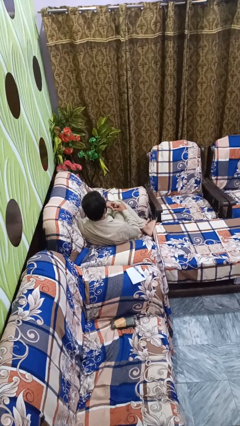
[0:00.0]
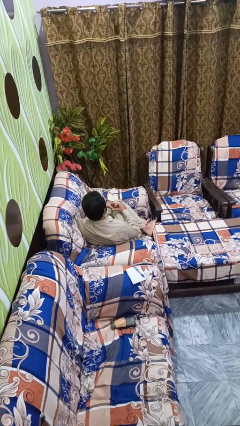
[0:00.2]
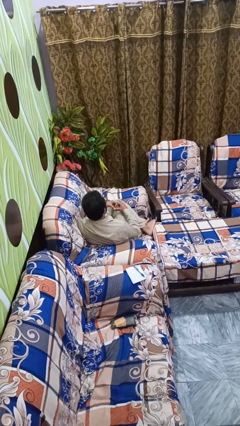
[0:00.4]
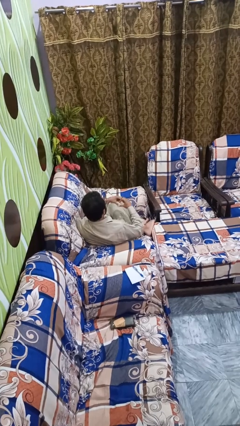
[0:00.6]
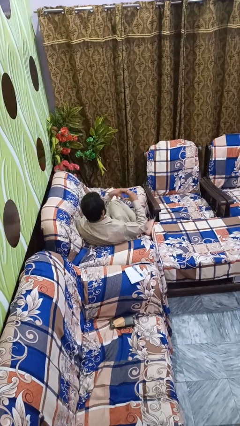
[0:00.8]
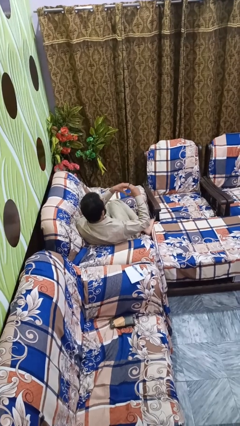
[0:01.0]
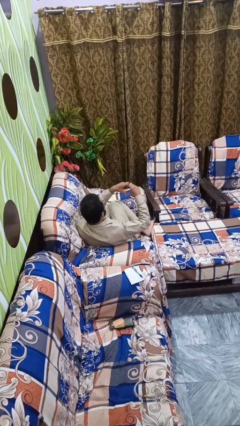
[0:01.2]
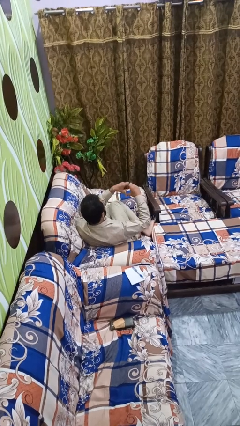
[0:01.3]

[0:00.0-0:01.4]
person gestures heart

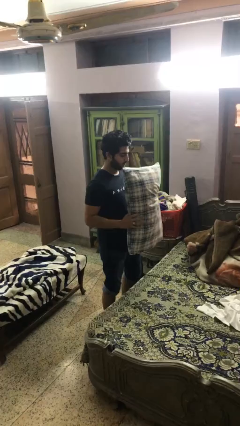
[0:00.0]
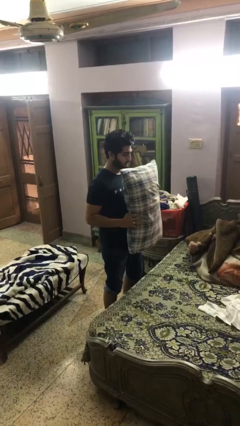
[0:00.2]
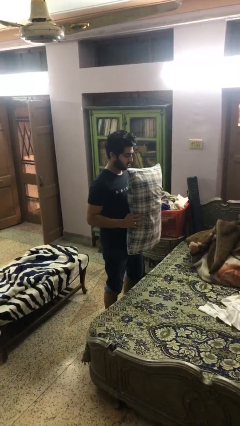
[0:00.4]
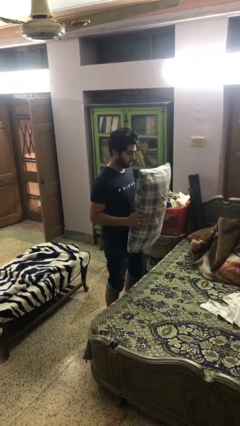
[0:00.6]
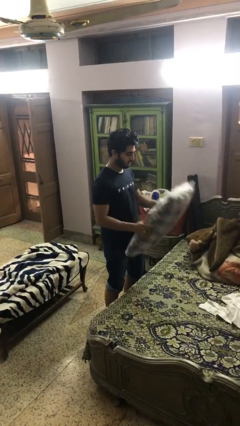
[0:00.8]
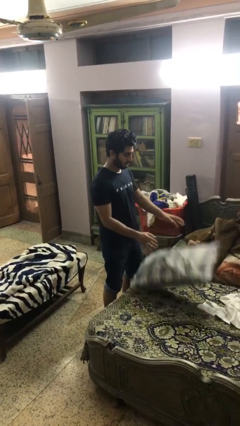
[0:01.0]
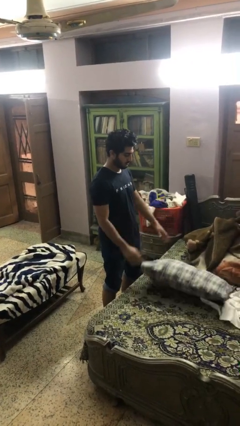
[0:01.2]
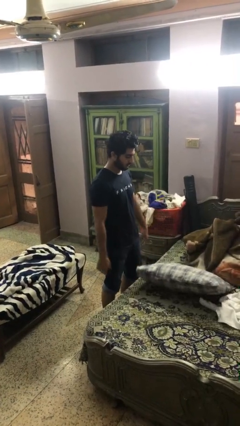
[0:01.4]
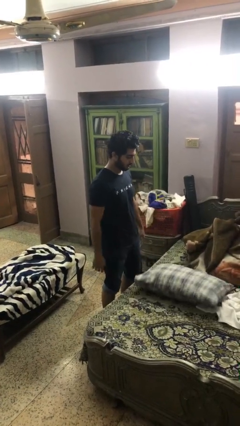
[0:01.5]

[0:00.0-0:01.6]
person puts down object on bed

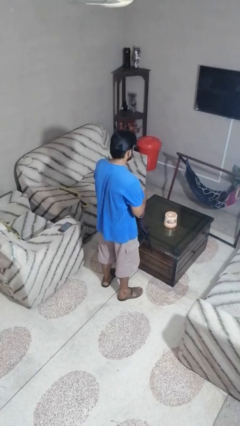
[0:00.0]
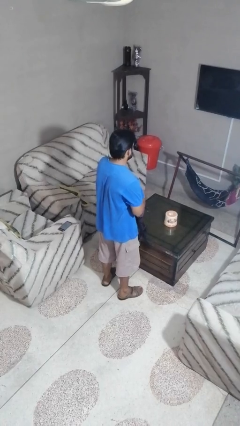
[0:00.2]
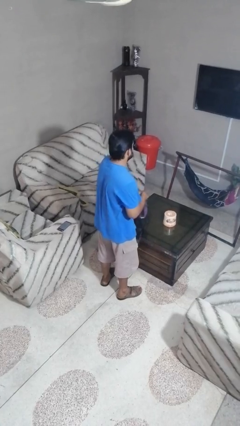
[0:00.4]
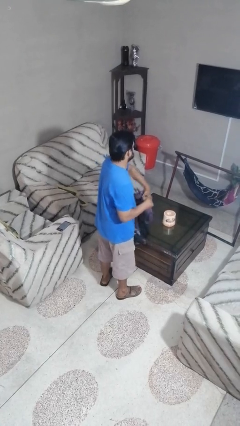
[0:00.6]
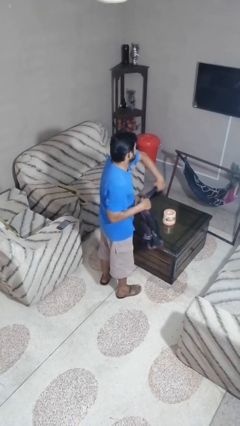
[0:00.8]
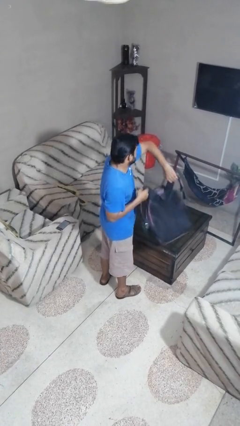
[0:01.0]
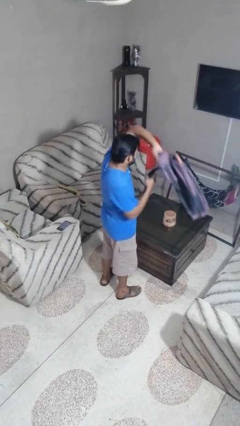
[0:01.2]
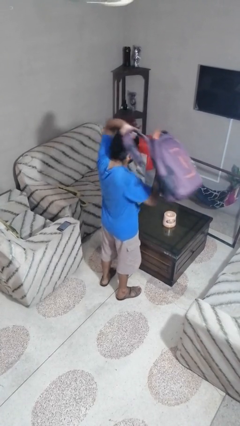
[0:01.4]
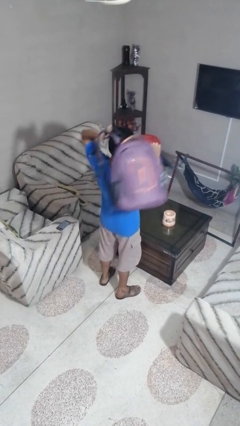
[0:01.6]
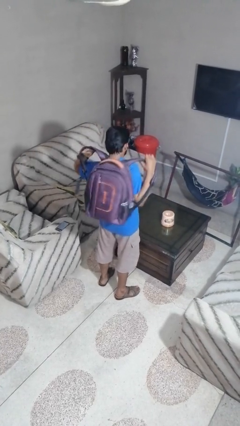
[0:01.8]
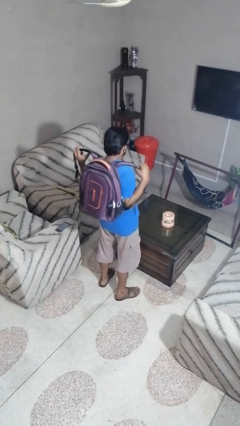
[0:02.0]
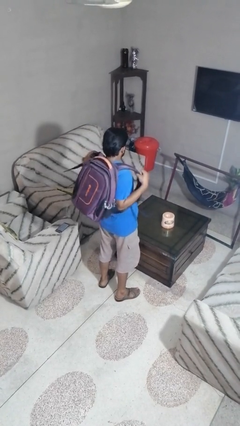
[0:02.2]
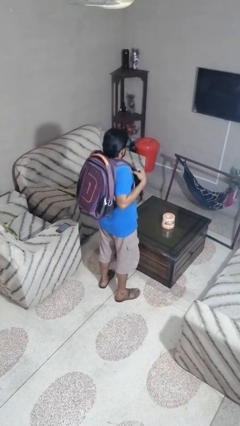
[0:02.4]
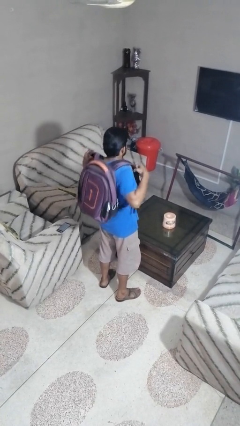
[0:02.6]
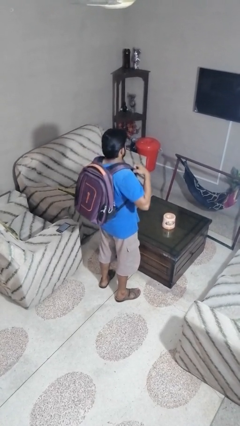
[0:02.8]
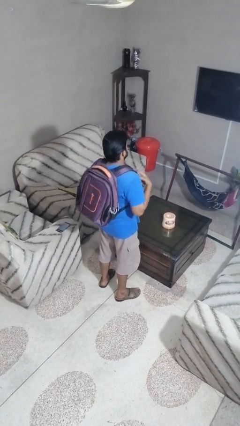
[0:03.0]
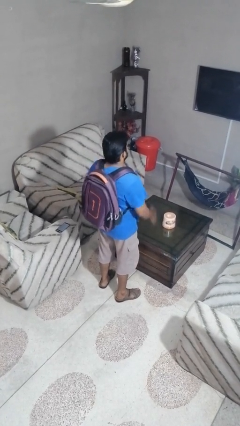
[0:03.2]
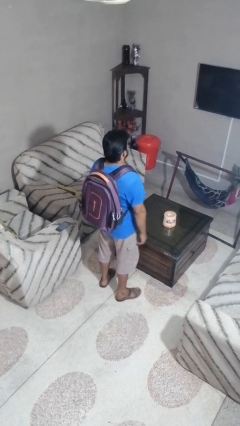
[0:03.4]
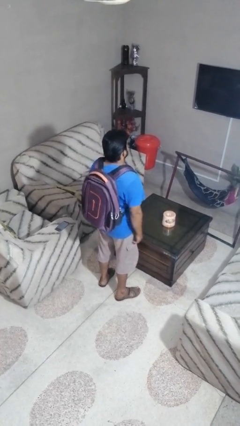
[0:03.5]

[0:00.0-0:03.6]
person puts on backpack

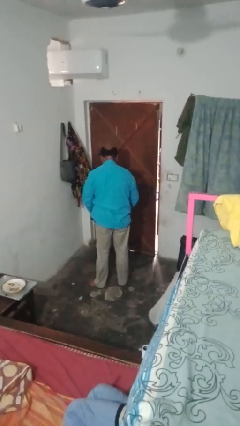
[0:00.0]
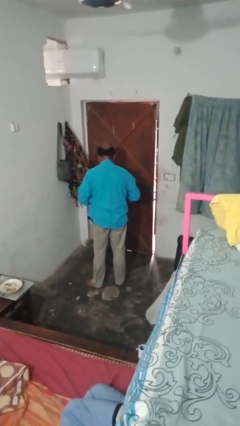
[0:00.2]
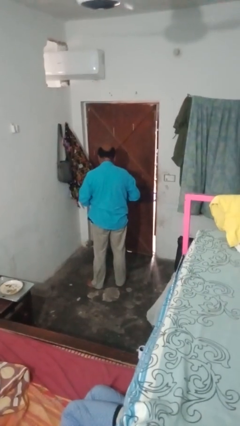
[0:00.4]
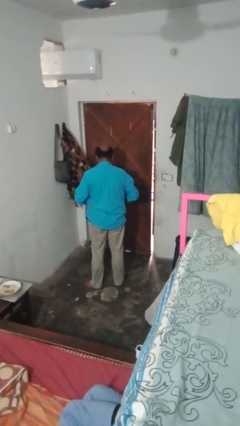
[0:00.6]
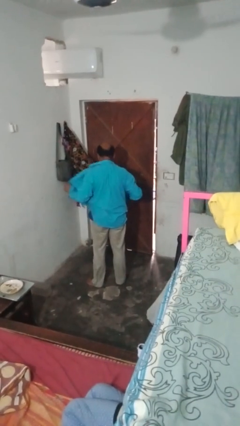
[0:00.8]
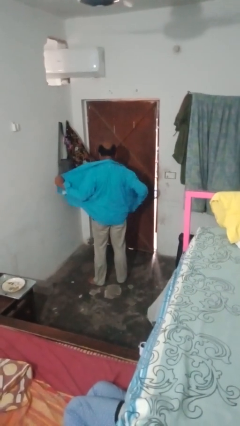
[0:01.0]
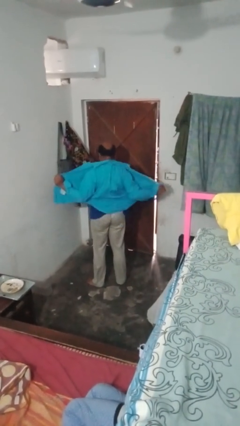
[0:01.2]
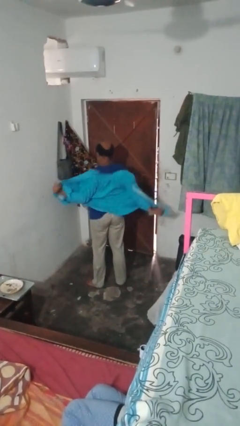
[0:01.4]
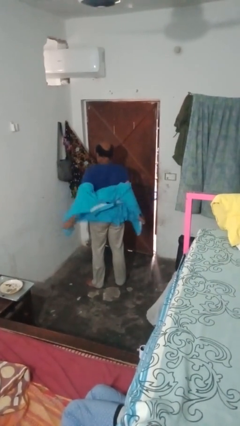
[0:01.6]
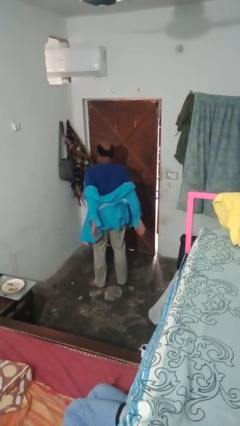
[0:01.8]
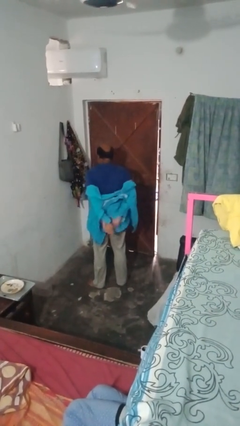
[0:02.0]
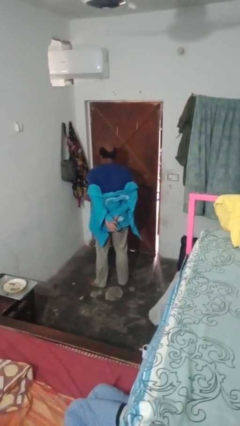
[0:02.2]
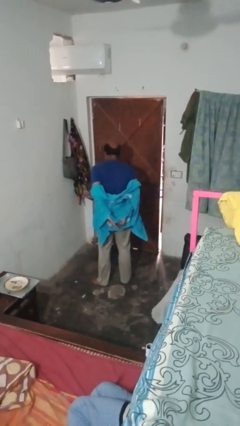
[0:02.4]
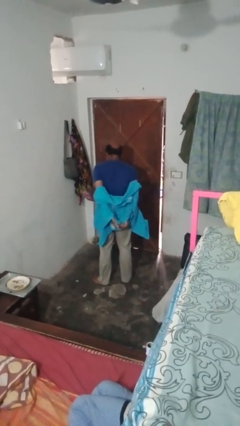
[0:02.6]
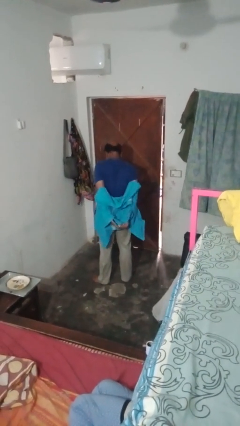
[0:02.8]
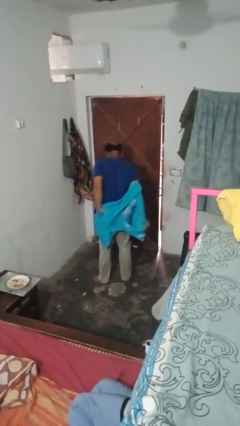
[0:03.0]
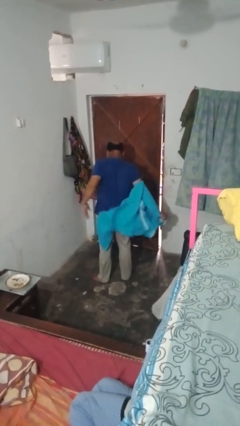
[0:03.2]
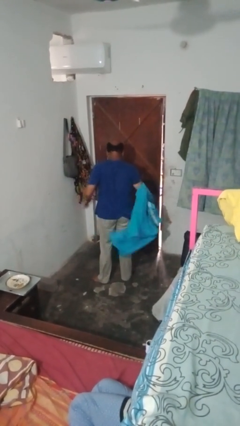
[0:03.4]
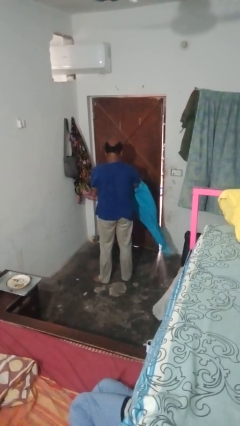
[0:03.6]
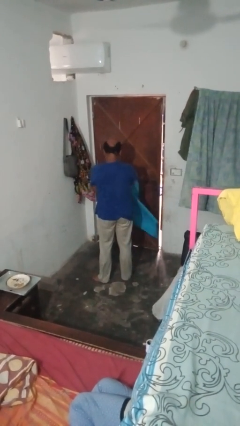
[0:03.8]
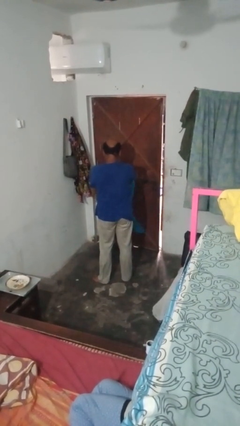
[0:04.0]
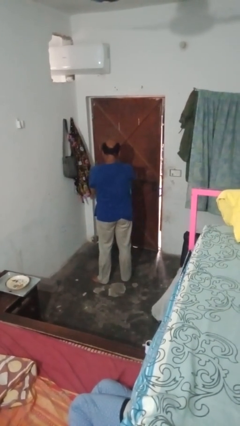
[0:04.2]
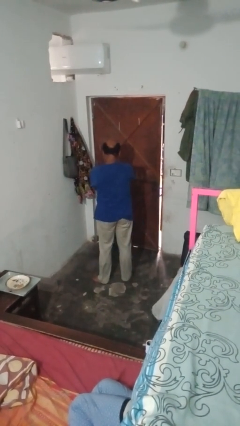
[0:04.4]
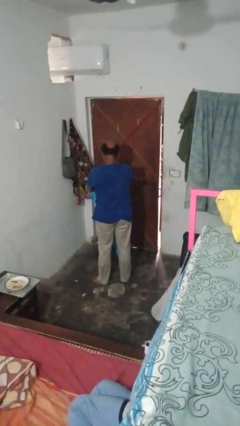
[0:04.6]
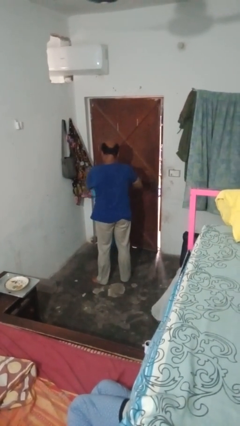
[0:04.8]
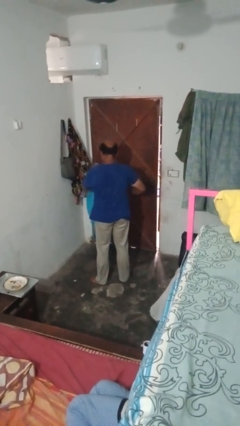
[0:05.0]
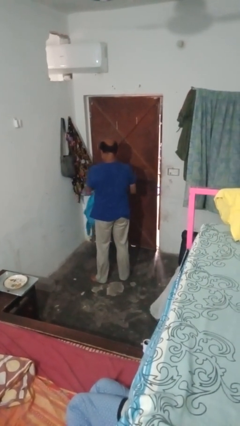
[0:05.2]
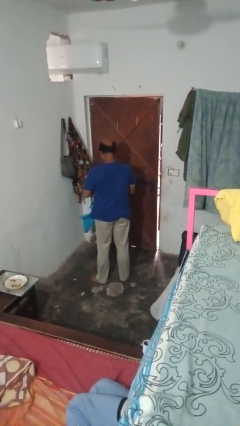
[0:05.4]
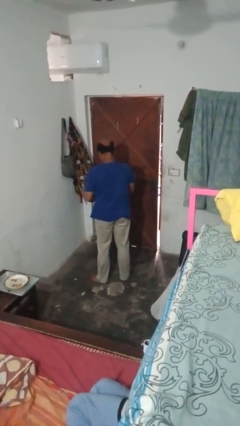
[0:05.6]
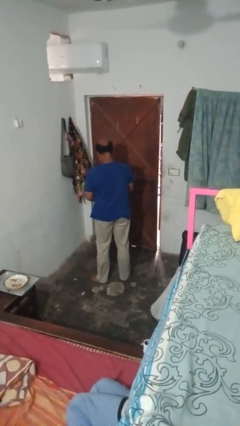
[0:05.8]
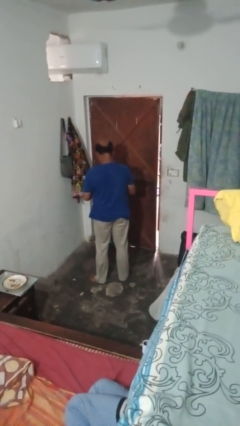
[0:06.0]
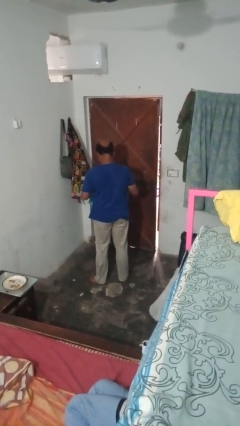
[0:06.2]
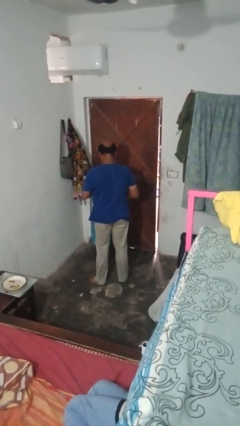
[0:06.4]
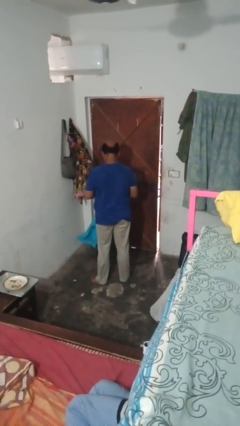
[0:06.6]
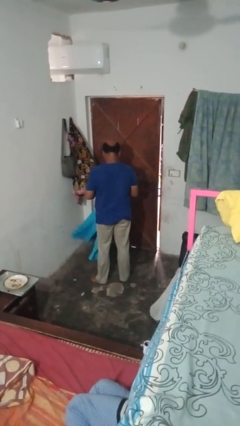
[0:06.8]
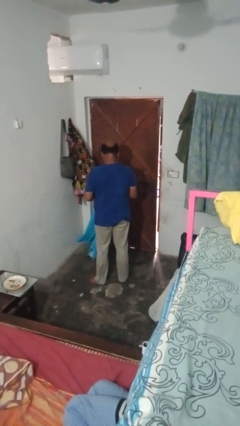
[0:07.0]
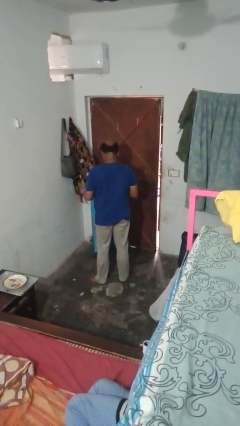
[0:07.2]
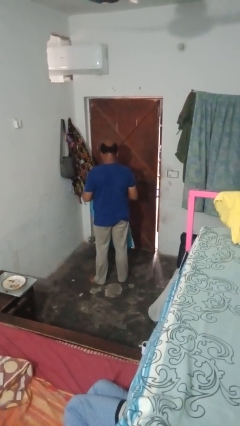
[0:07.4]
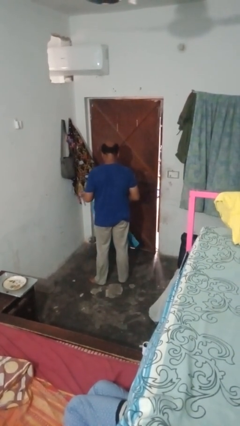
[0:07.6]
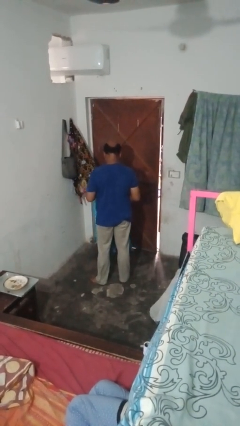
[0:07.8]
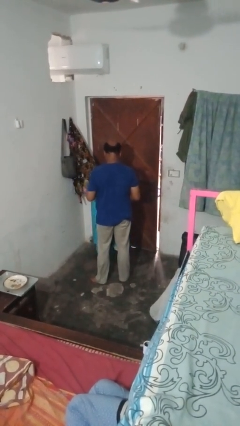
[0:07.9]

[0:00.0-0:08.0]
person takes off shirt

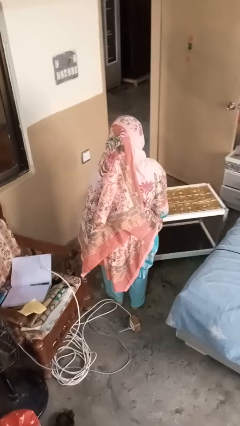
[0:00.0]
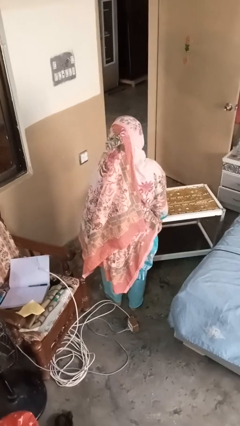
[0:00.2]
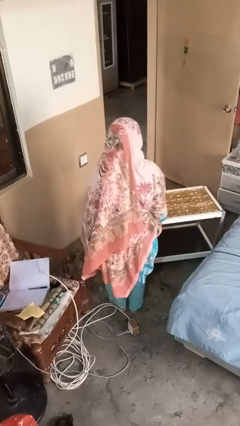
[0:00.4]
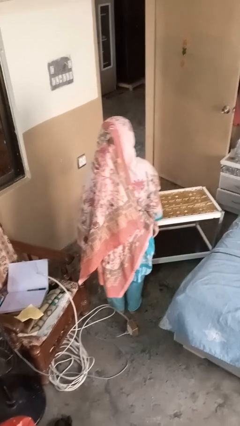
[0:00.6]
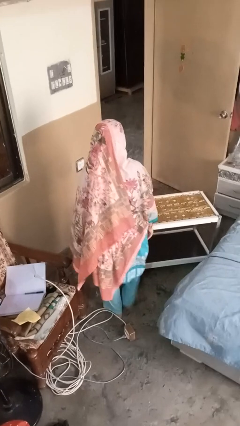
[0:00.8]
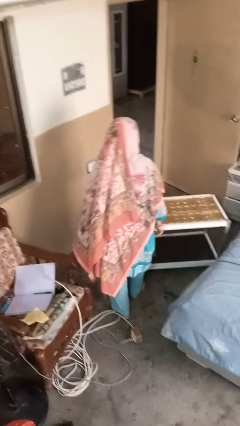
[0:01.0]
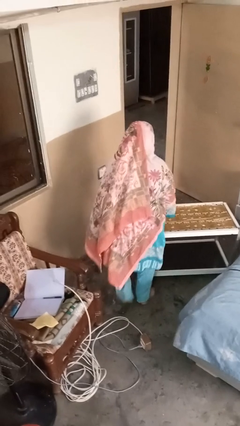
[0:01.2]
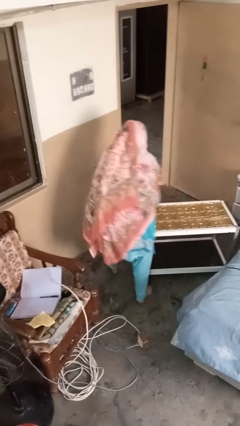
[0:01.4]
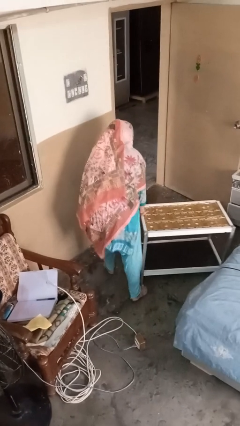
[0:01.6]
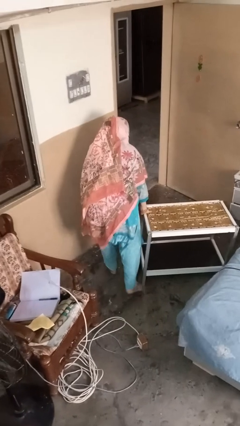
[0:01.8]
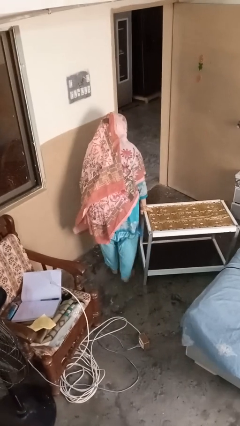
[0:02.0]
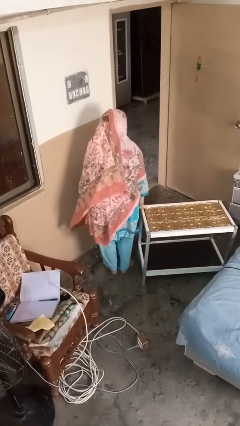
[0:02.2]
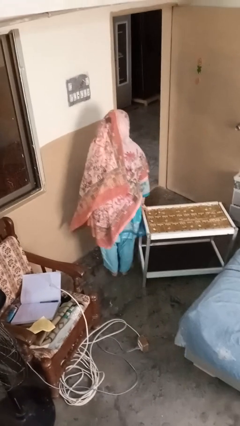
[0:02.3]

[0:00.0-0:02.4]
person bumps into table

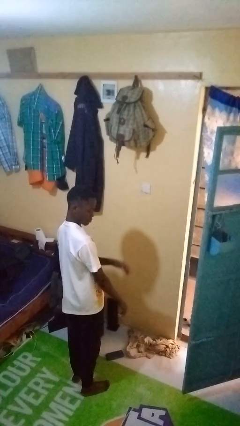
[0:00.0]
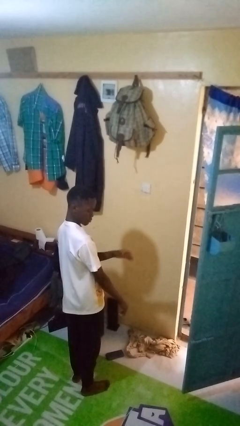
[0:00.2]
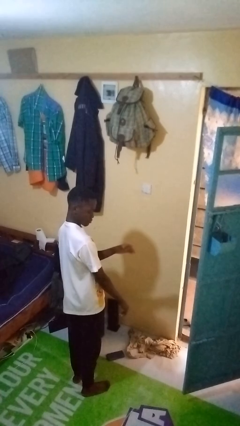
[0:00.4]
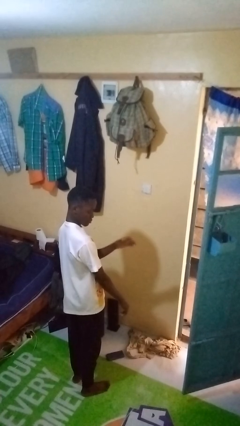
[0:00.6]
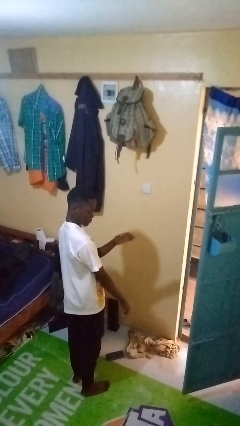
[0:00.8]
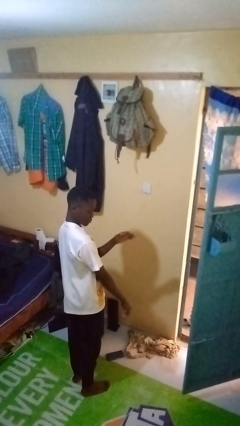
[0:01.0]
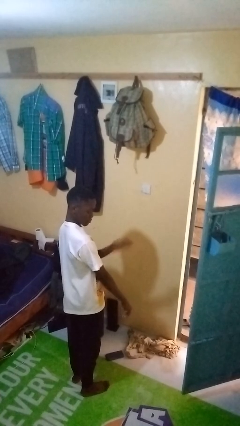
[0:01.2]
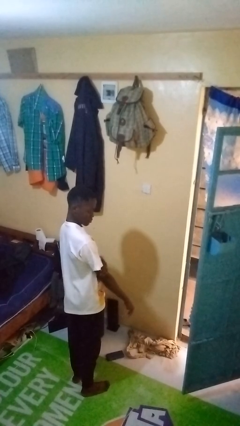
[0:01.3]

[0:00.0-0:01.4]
person swats bug
